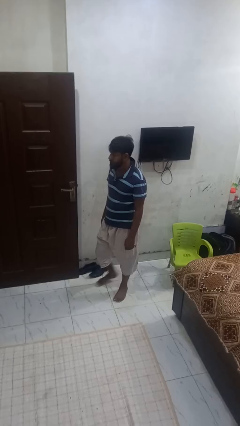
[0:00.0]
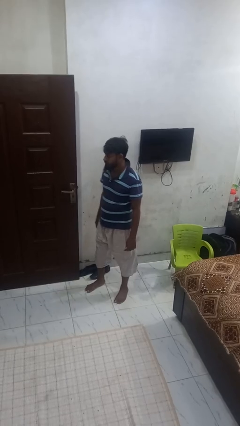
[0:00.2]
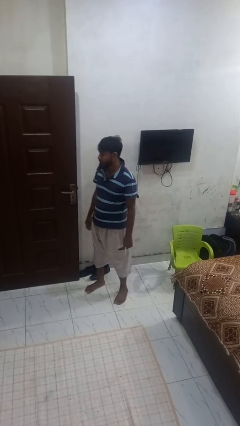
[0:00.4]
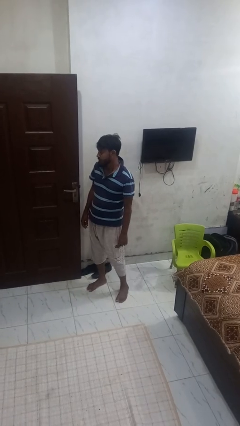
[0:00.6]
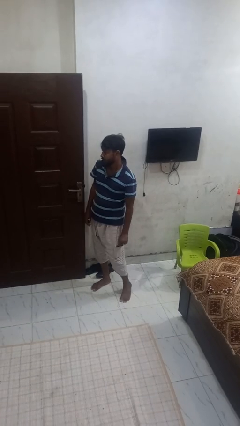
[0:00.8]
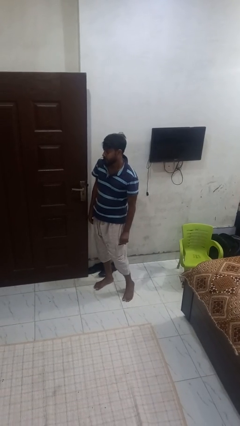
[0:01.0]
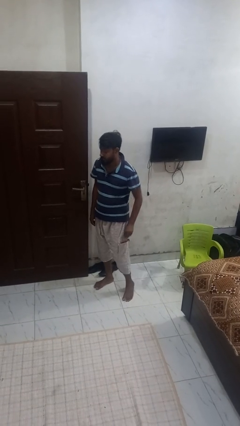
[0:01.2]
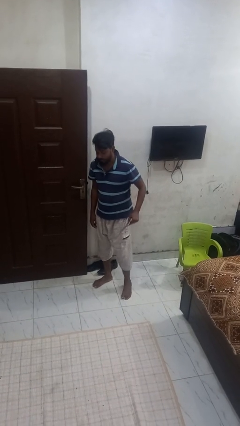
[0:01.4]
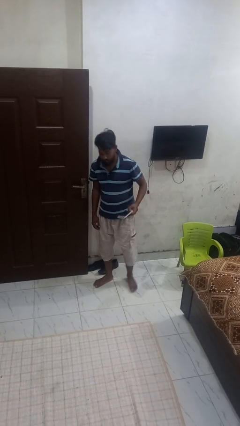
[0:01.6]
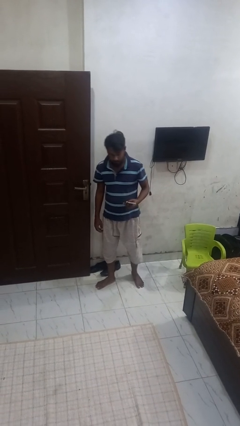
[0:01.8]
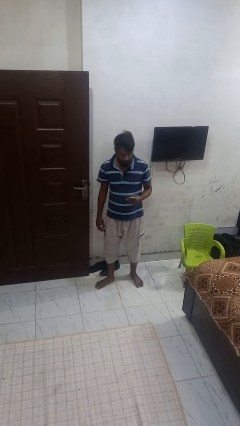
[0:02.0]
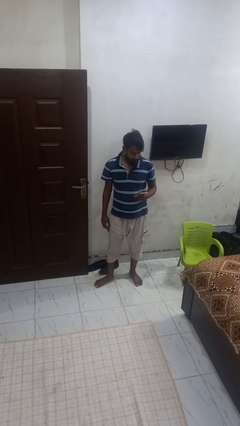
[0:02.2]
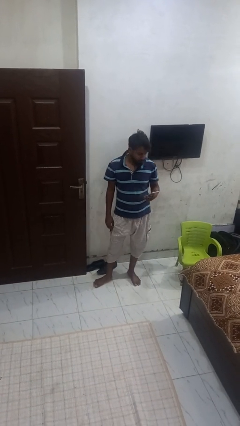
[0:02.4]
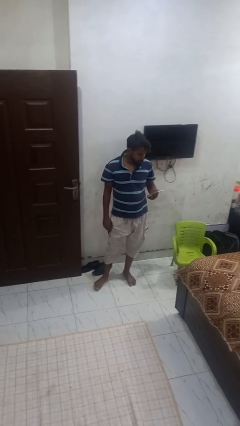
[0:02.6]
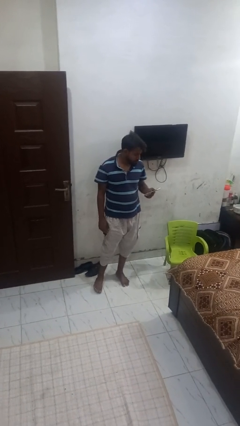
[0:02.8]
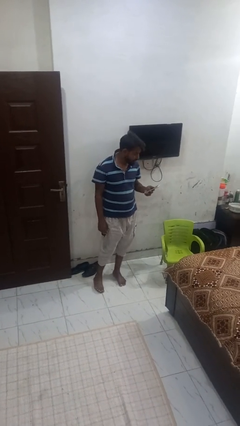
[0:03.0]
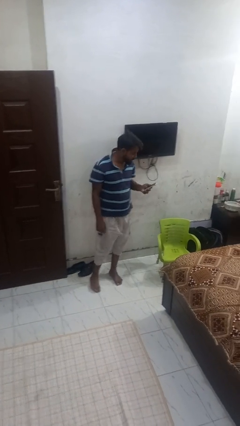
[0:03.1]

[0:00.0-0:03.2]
person takes phone from pocket

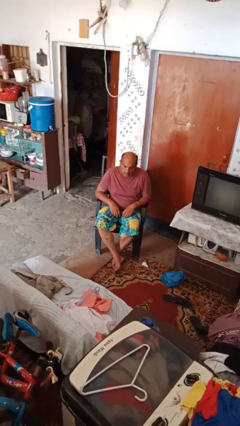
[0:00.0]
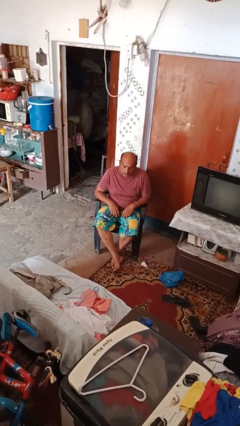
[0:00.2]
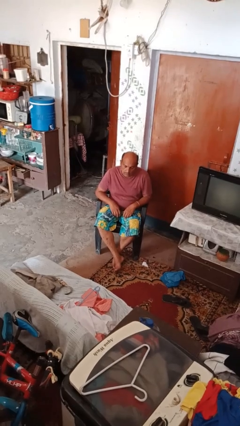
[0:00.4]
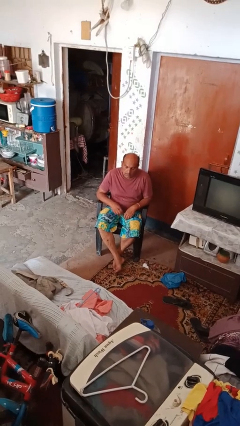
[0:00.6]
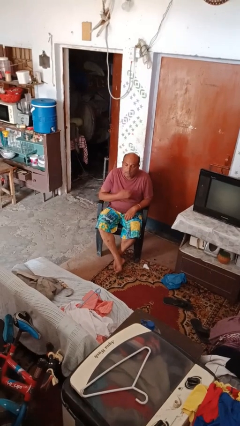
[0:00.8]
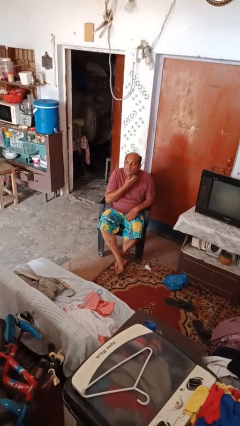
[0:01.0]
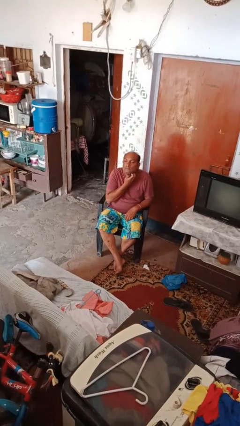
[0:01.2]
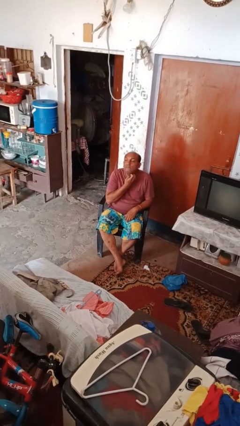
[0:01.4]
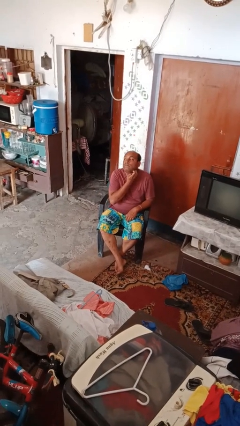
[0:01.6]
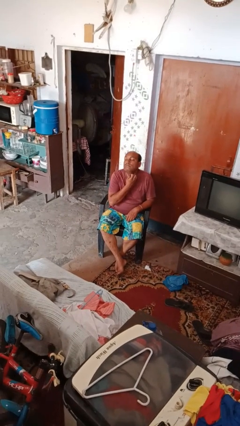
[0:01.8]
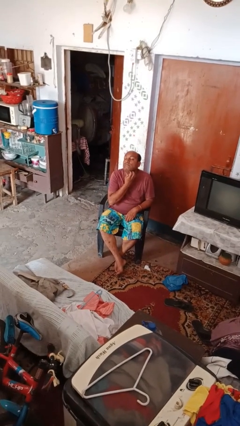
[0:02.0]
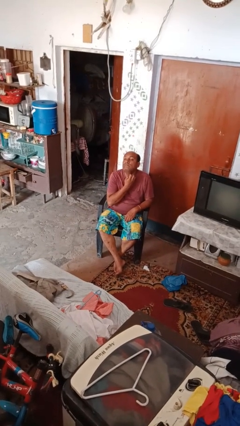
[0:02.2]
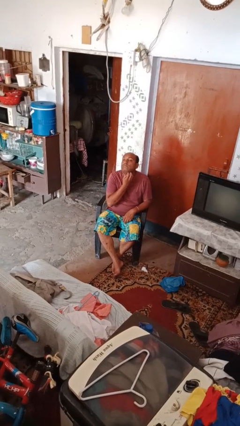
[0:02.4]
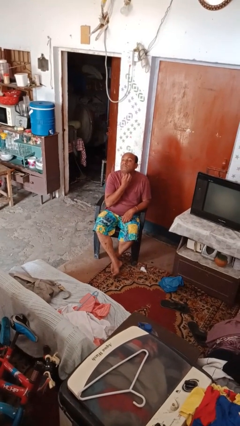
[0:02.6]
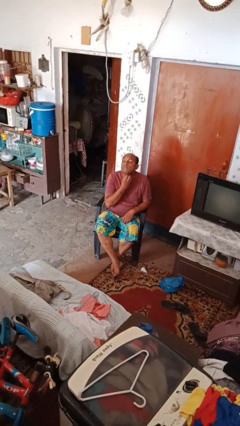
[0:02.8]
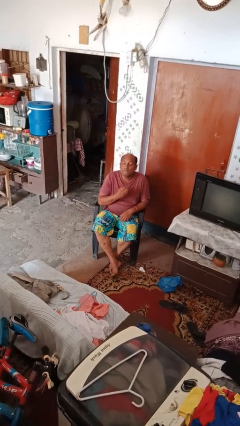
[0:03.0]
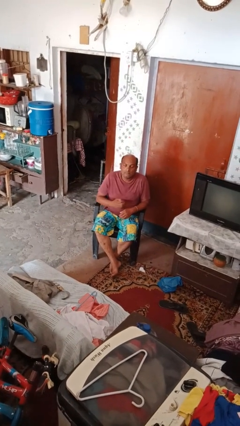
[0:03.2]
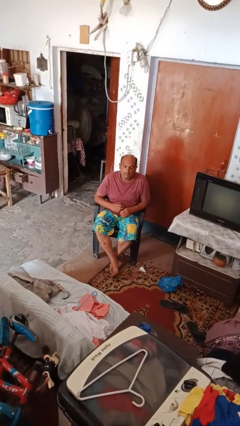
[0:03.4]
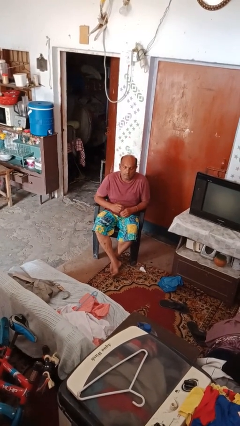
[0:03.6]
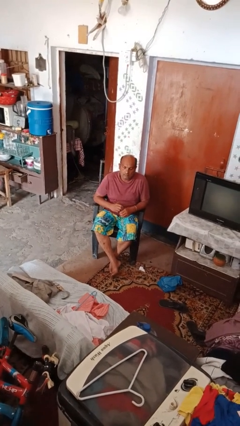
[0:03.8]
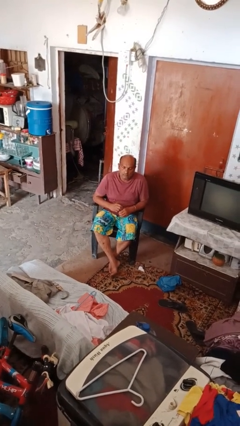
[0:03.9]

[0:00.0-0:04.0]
person scratches face

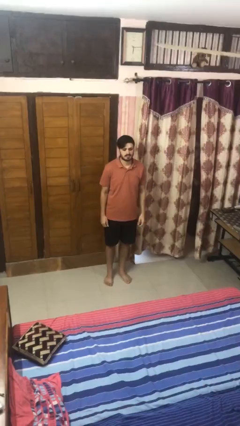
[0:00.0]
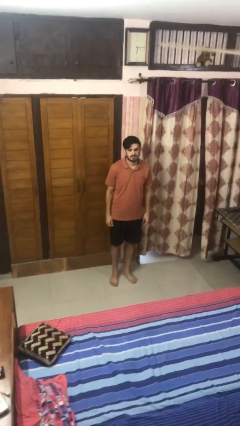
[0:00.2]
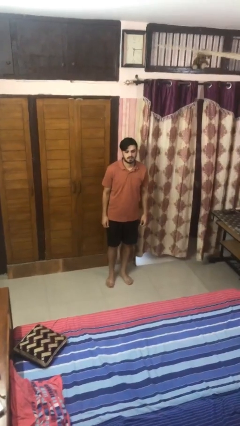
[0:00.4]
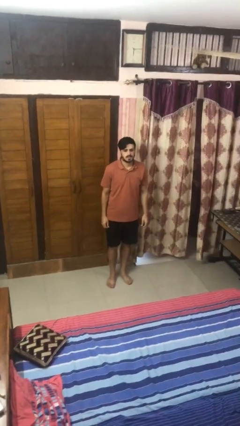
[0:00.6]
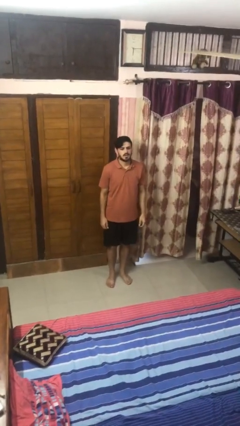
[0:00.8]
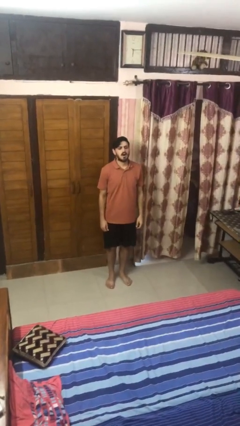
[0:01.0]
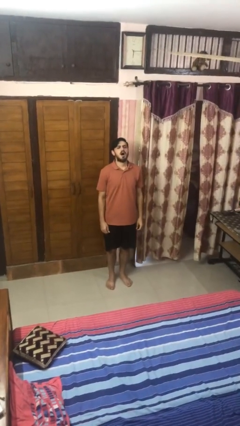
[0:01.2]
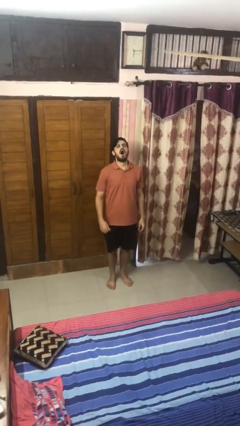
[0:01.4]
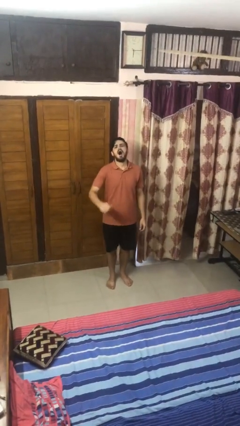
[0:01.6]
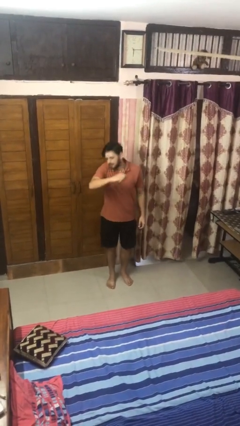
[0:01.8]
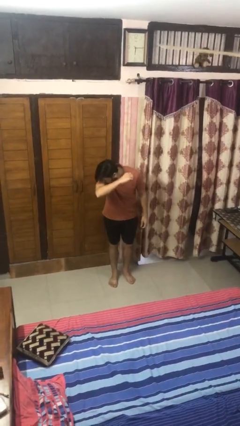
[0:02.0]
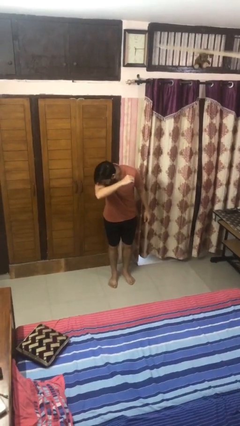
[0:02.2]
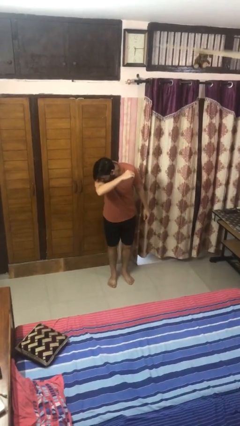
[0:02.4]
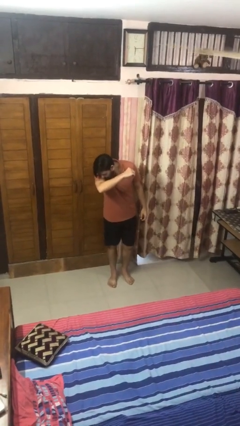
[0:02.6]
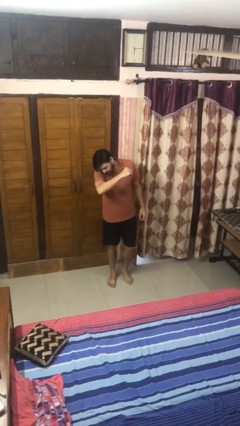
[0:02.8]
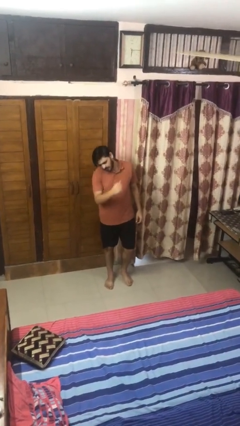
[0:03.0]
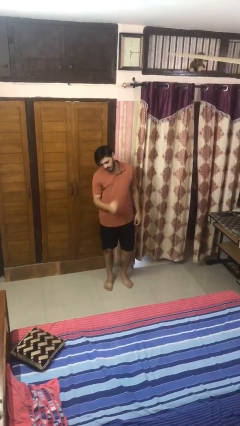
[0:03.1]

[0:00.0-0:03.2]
person sneezes into arm

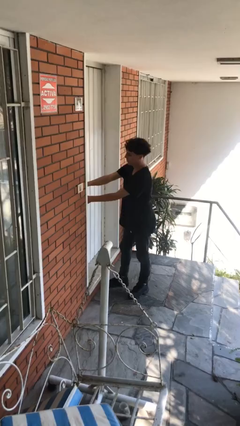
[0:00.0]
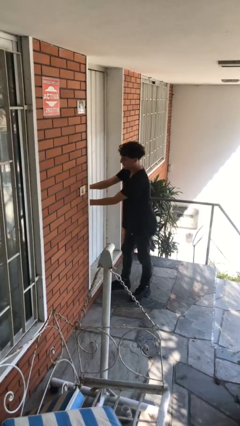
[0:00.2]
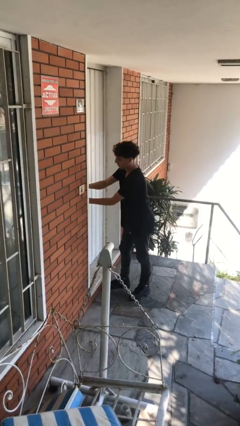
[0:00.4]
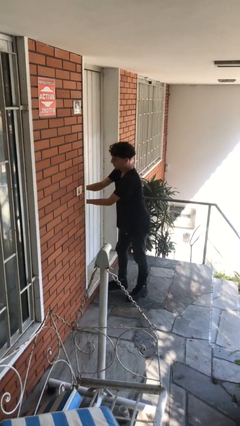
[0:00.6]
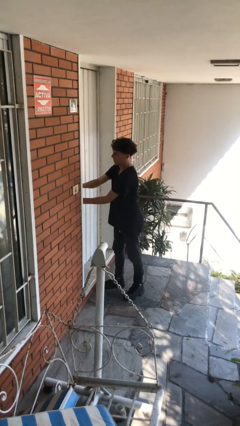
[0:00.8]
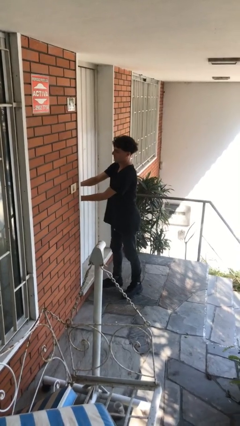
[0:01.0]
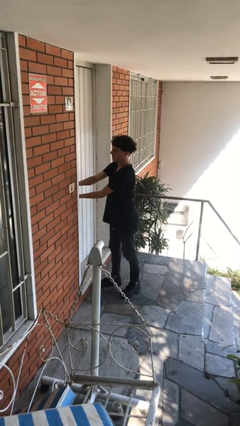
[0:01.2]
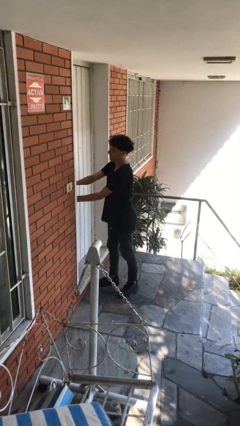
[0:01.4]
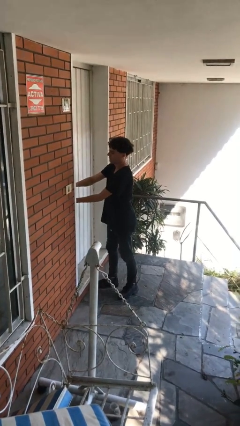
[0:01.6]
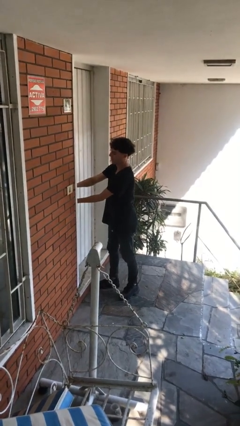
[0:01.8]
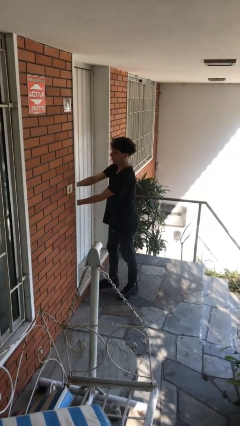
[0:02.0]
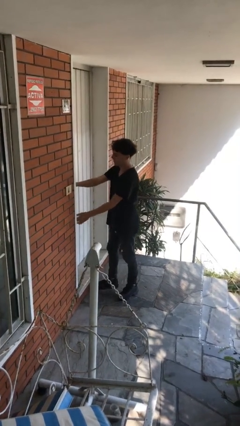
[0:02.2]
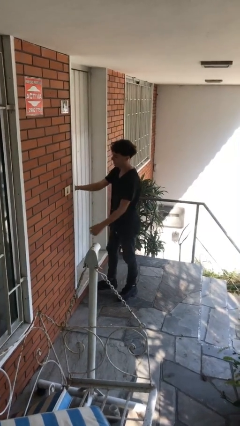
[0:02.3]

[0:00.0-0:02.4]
person locks door with keys

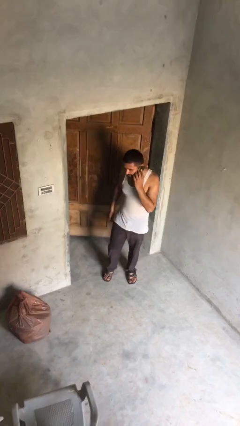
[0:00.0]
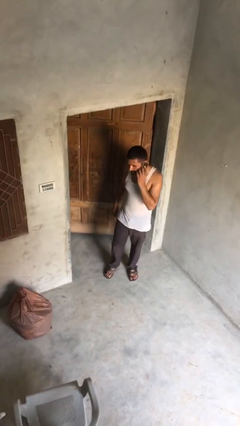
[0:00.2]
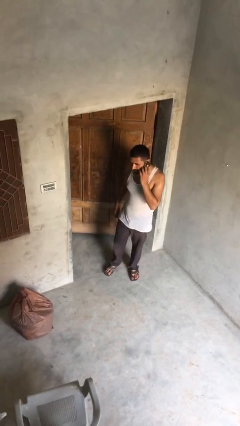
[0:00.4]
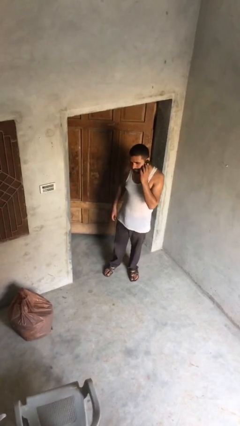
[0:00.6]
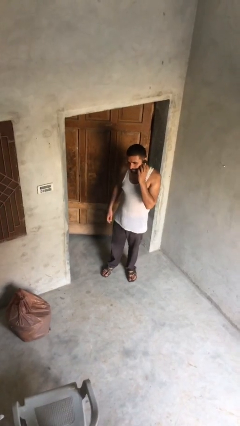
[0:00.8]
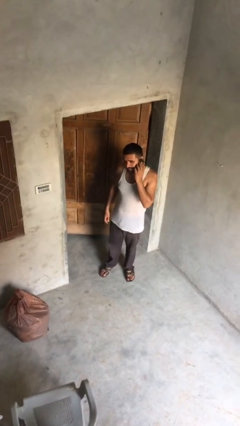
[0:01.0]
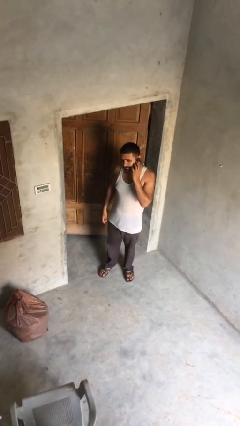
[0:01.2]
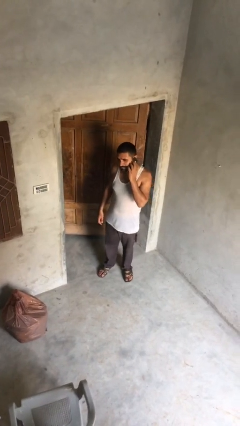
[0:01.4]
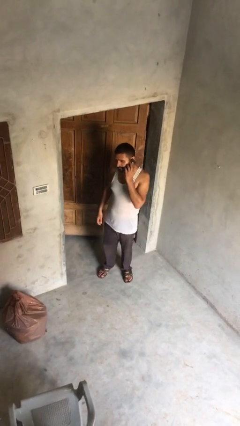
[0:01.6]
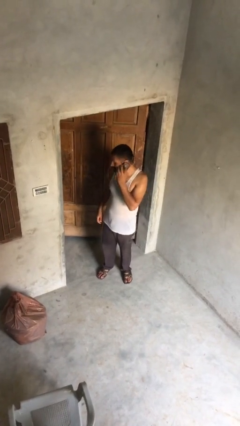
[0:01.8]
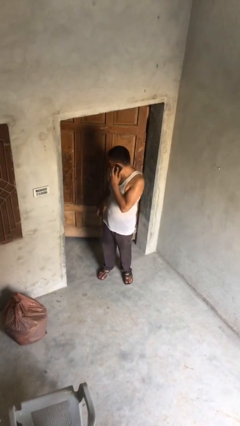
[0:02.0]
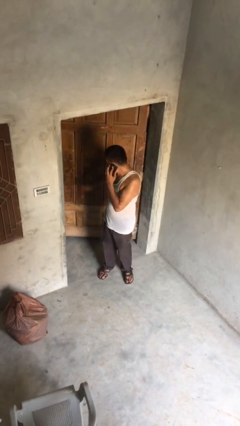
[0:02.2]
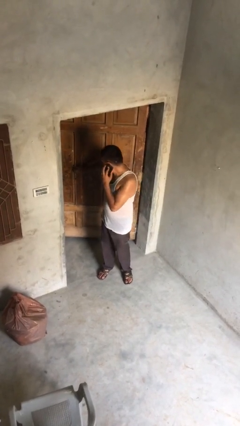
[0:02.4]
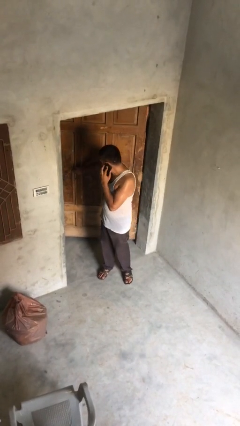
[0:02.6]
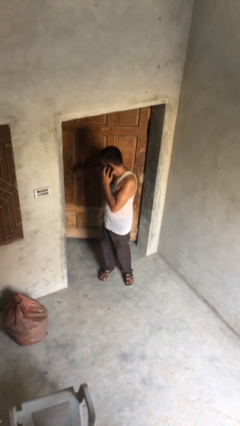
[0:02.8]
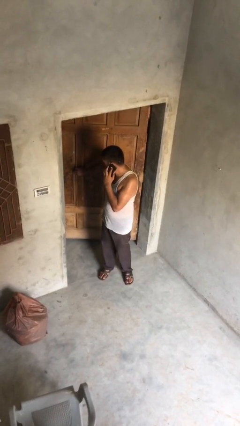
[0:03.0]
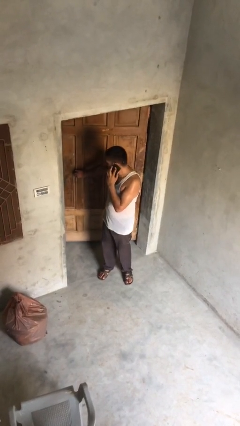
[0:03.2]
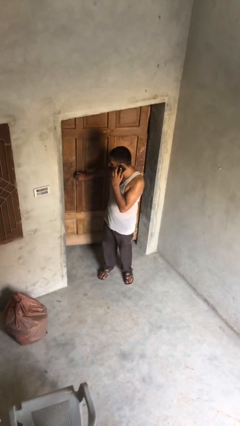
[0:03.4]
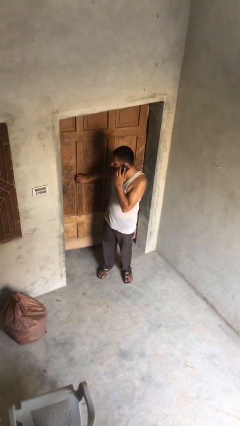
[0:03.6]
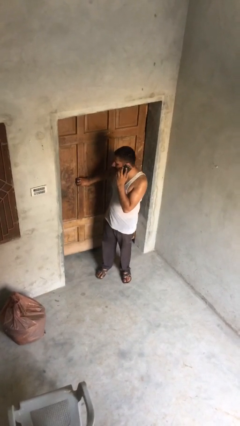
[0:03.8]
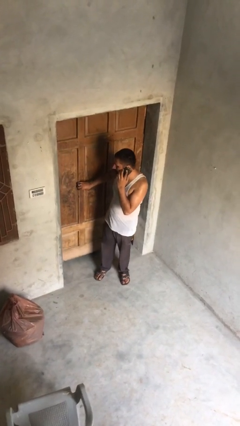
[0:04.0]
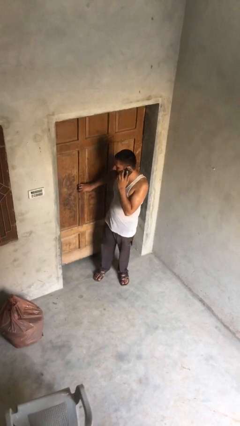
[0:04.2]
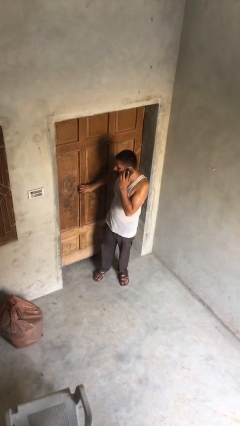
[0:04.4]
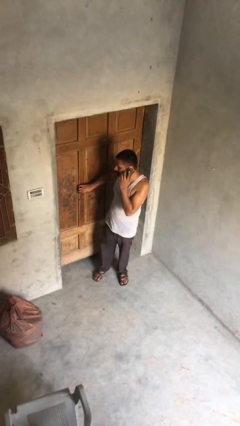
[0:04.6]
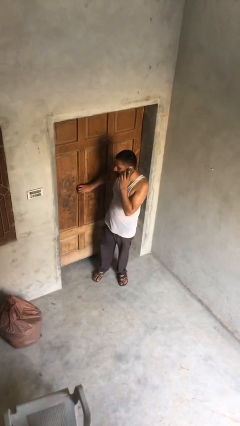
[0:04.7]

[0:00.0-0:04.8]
person closes facility door
